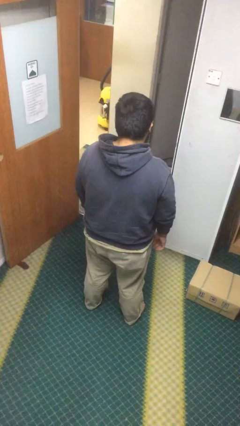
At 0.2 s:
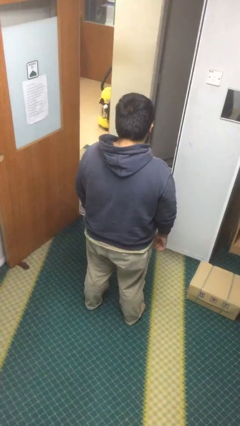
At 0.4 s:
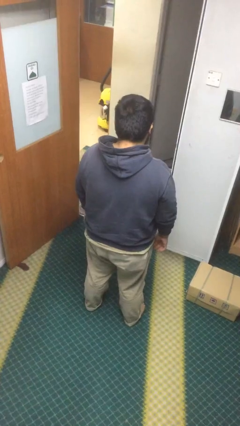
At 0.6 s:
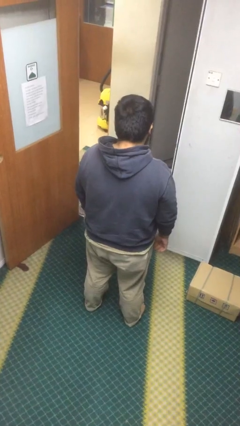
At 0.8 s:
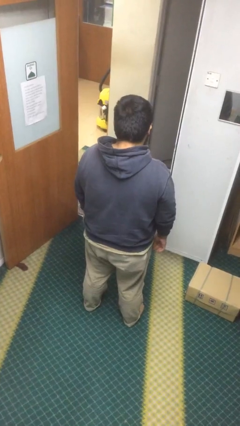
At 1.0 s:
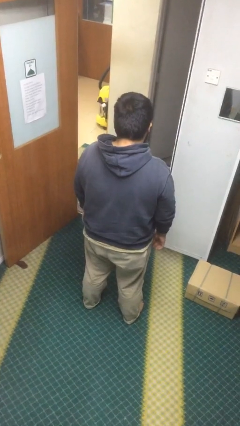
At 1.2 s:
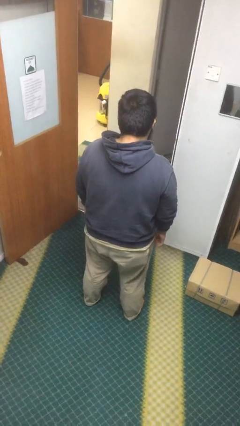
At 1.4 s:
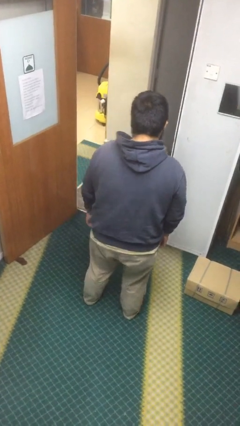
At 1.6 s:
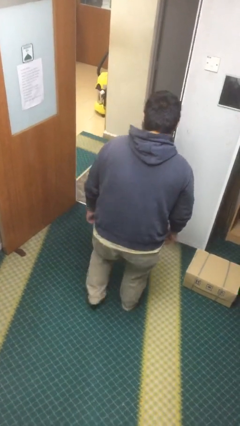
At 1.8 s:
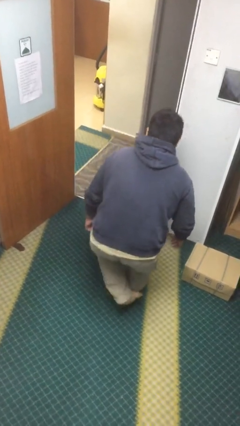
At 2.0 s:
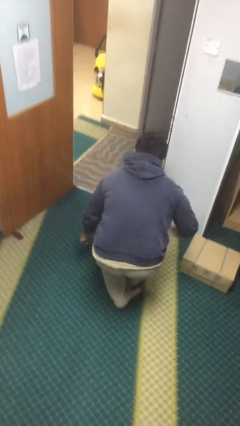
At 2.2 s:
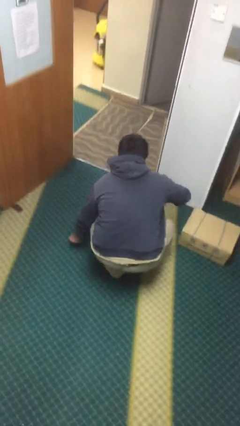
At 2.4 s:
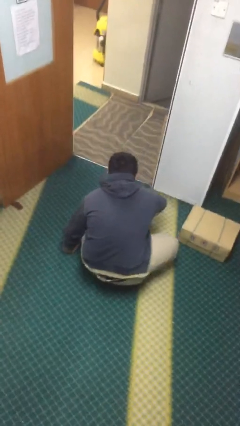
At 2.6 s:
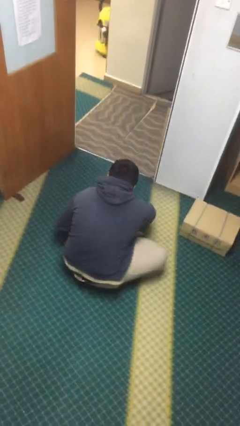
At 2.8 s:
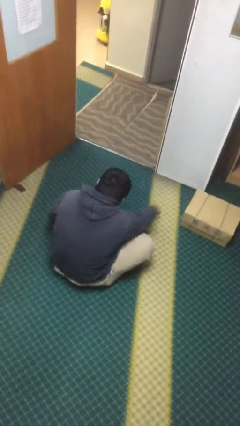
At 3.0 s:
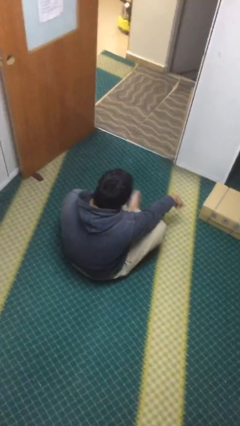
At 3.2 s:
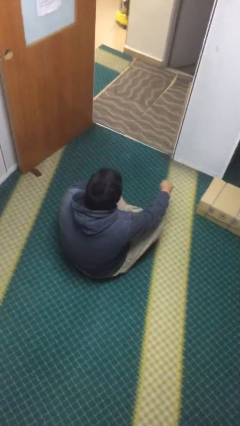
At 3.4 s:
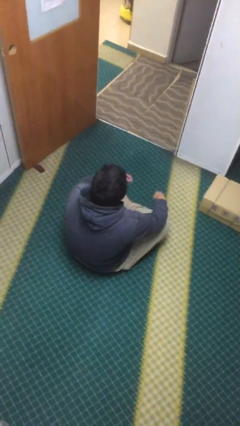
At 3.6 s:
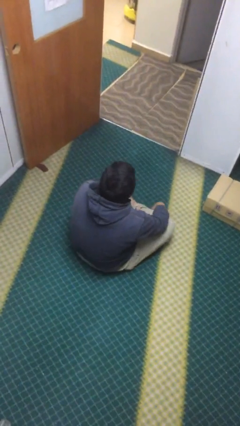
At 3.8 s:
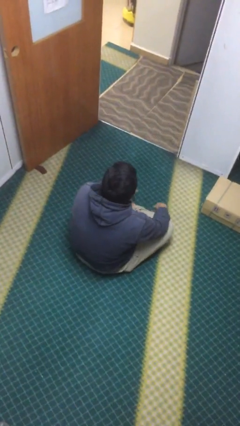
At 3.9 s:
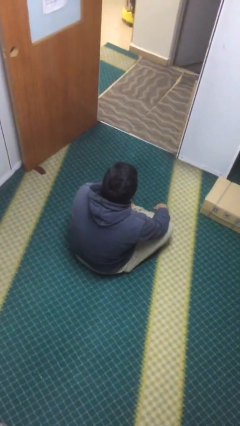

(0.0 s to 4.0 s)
person sits crisscross

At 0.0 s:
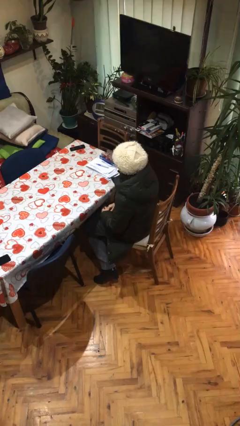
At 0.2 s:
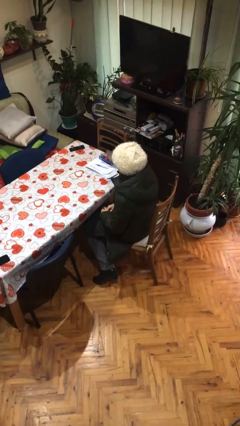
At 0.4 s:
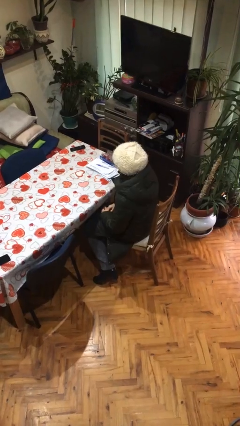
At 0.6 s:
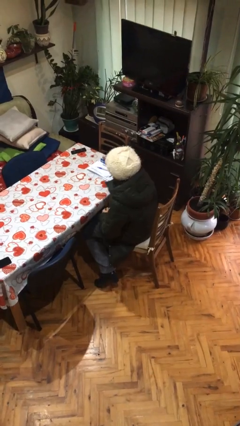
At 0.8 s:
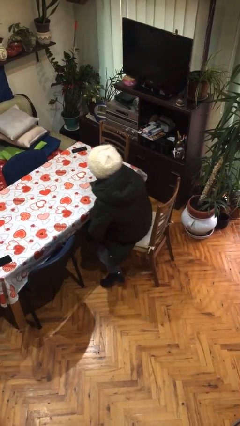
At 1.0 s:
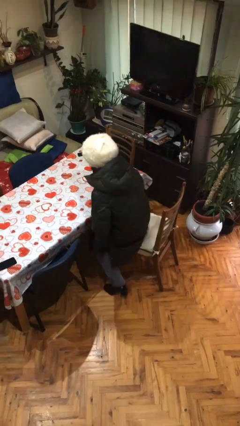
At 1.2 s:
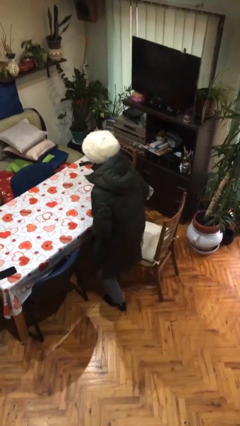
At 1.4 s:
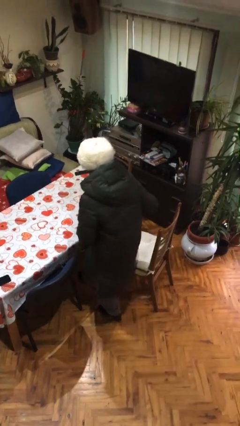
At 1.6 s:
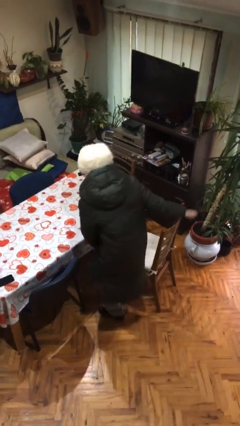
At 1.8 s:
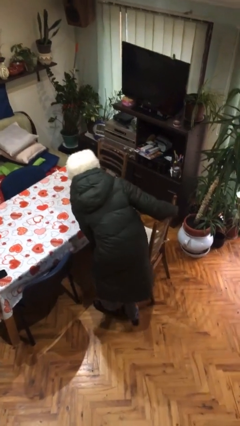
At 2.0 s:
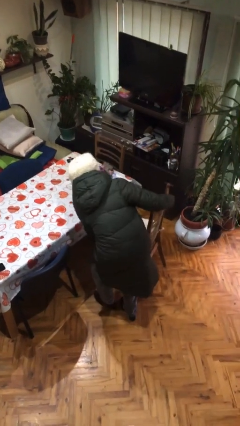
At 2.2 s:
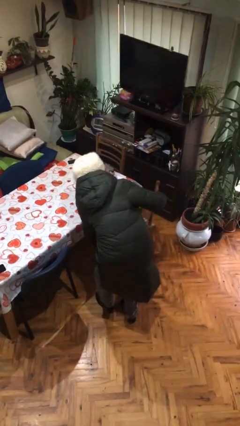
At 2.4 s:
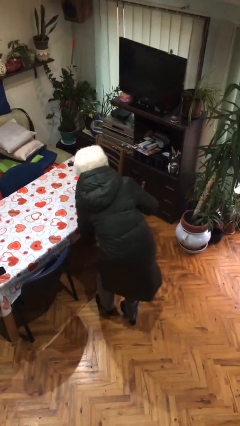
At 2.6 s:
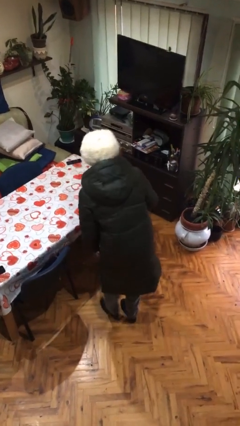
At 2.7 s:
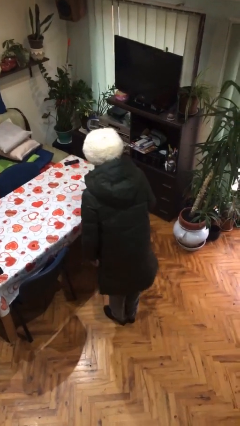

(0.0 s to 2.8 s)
person stands up

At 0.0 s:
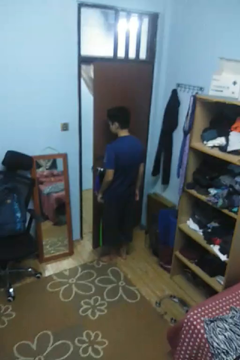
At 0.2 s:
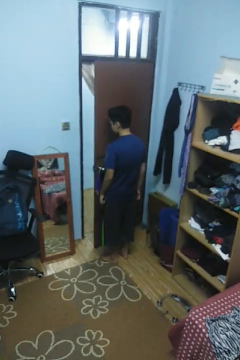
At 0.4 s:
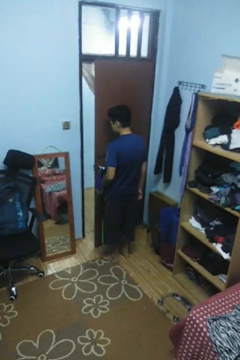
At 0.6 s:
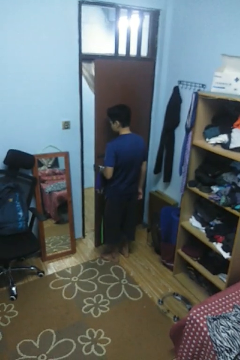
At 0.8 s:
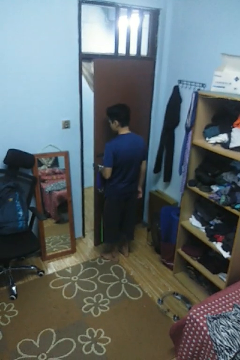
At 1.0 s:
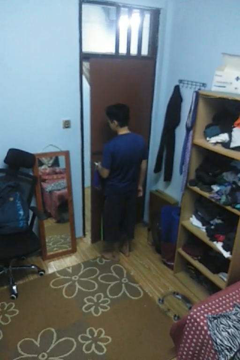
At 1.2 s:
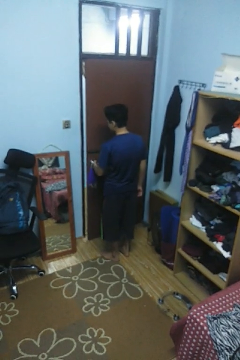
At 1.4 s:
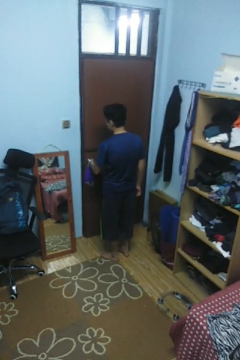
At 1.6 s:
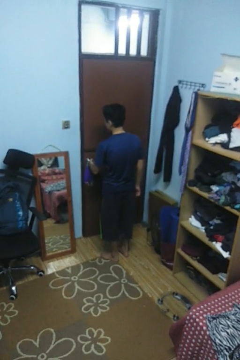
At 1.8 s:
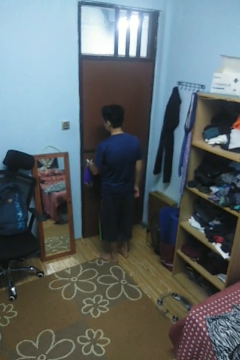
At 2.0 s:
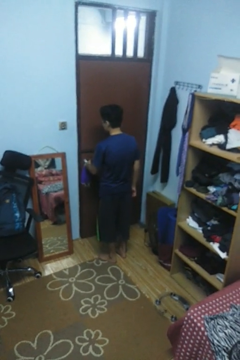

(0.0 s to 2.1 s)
person closes facility door

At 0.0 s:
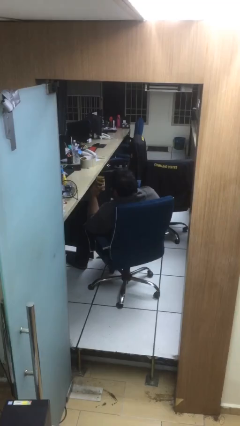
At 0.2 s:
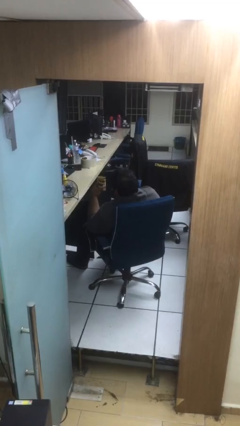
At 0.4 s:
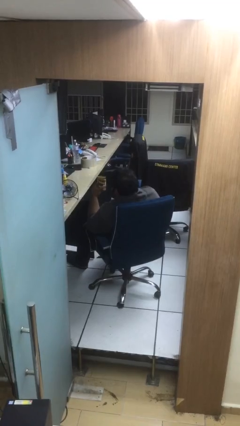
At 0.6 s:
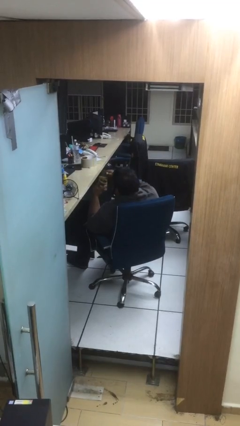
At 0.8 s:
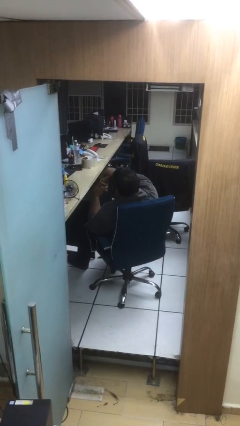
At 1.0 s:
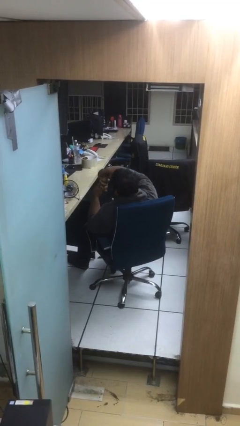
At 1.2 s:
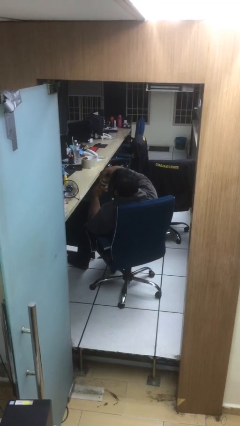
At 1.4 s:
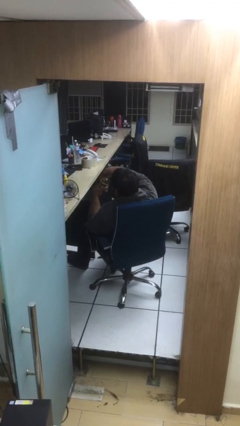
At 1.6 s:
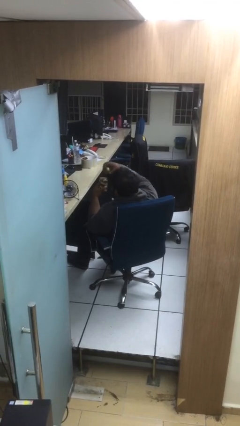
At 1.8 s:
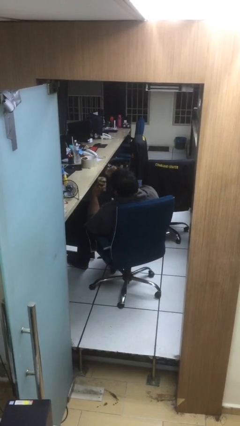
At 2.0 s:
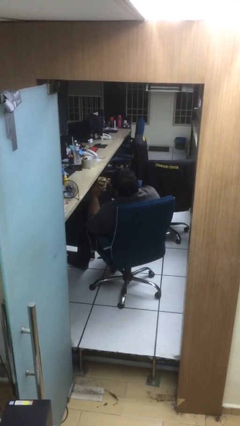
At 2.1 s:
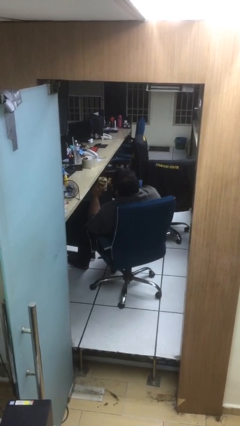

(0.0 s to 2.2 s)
person opens jar

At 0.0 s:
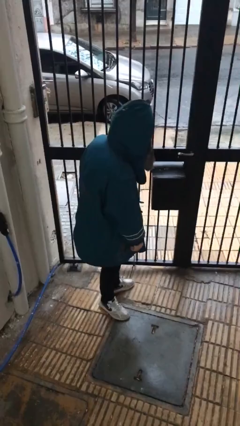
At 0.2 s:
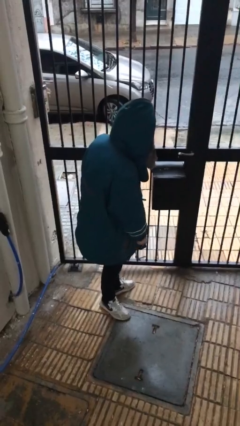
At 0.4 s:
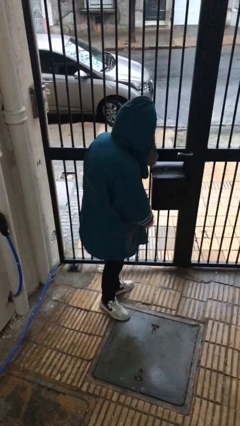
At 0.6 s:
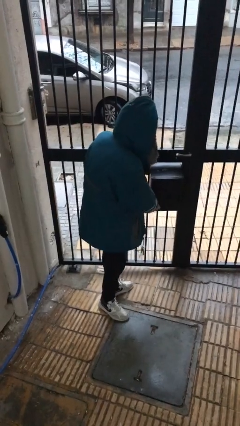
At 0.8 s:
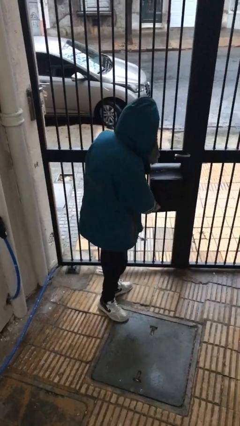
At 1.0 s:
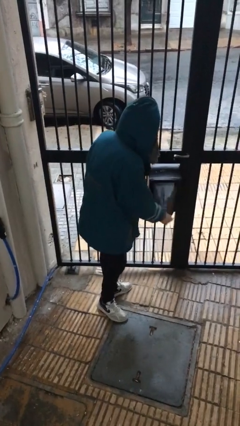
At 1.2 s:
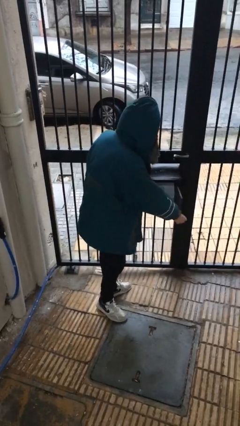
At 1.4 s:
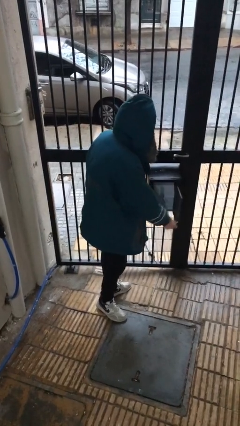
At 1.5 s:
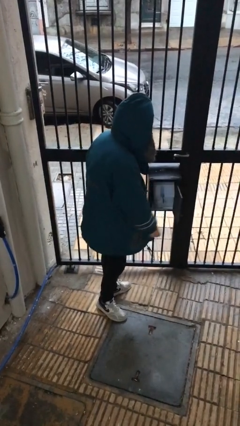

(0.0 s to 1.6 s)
person opens mailbox

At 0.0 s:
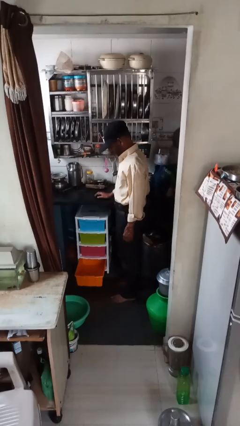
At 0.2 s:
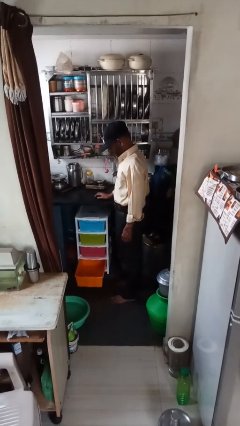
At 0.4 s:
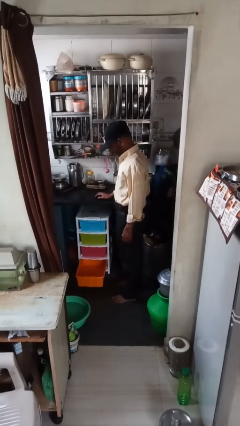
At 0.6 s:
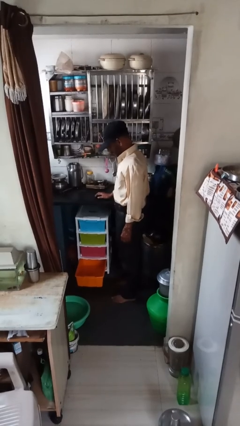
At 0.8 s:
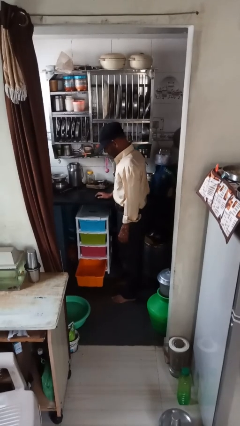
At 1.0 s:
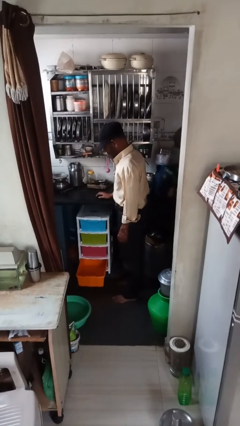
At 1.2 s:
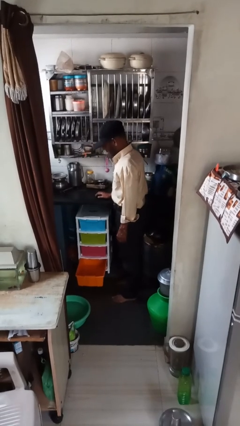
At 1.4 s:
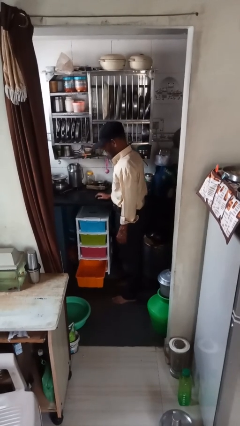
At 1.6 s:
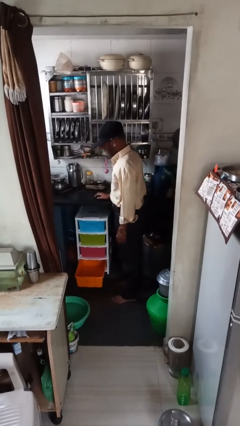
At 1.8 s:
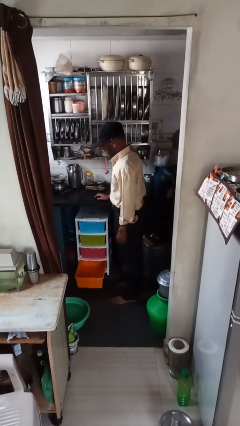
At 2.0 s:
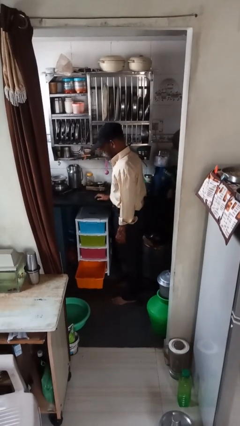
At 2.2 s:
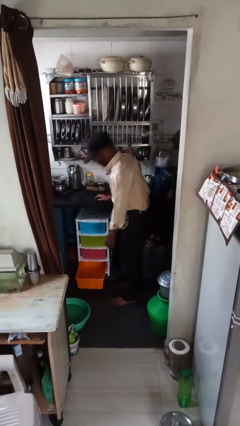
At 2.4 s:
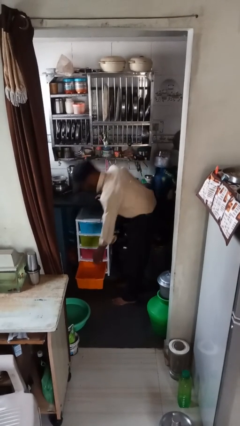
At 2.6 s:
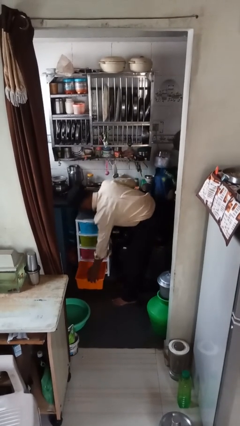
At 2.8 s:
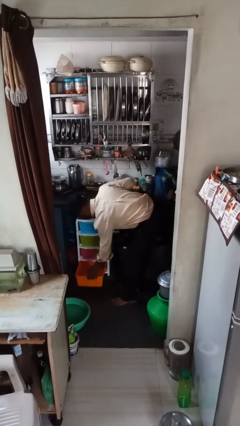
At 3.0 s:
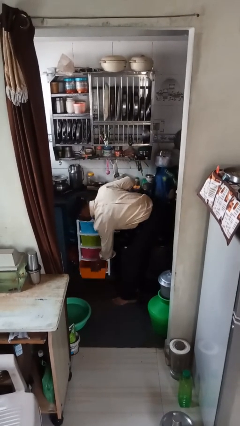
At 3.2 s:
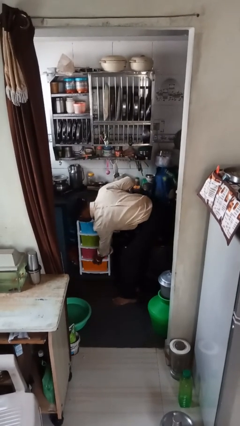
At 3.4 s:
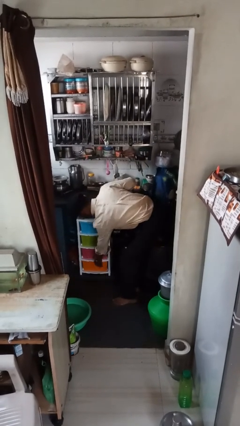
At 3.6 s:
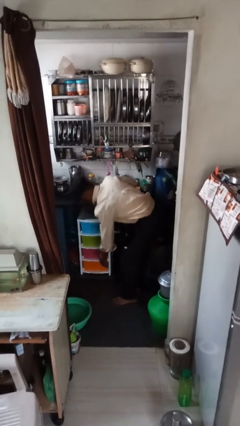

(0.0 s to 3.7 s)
person closes kitchen drawer

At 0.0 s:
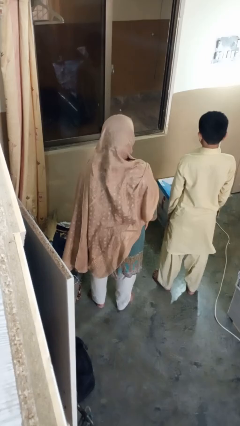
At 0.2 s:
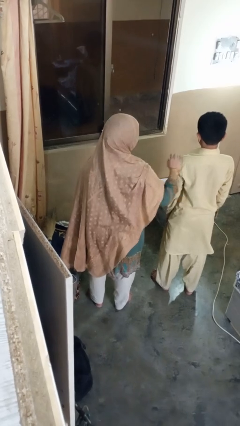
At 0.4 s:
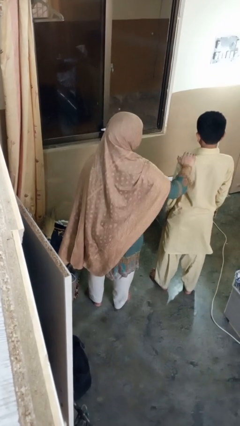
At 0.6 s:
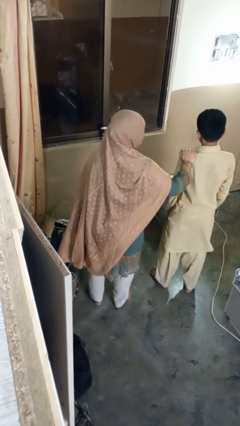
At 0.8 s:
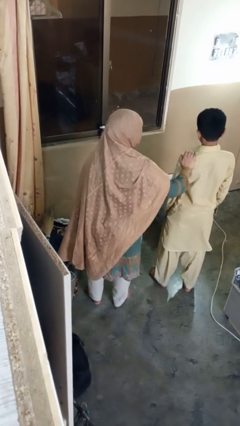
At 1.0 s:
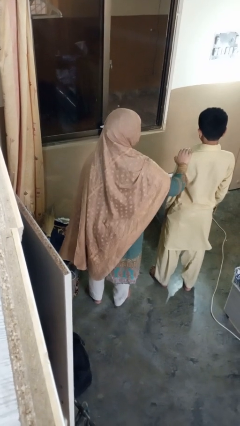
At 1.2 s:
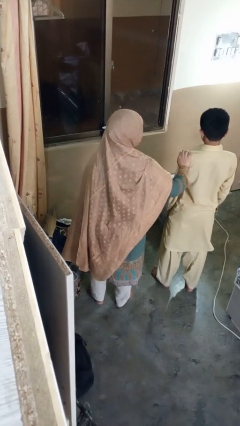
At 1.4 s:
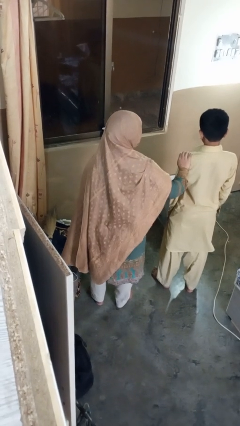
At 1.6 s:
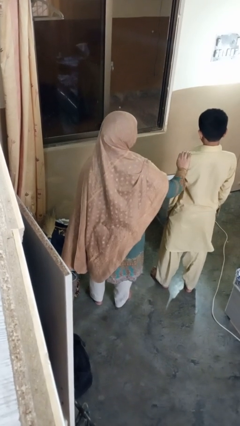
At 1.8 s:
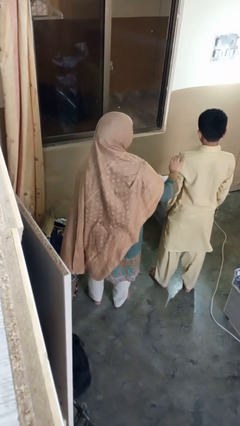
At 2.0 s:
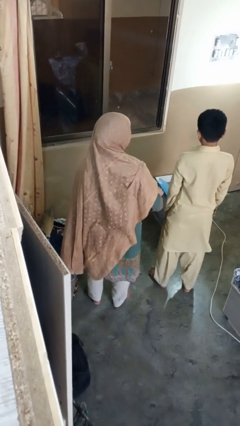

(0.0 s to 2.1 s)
person grabs person by bicep
